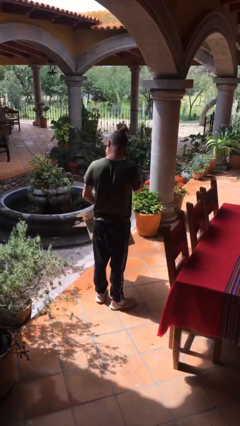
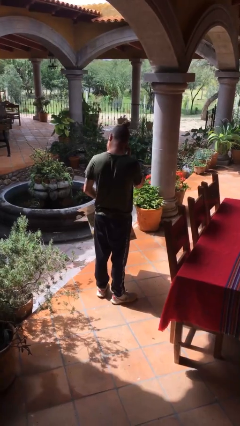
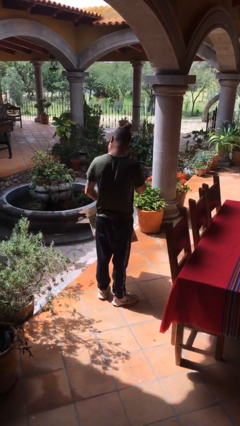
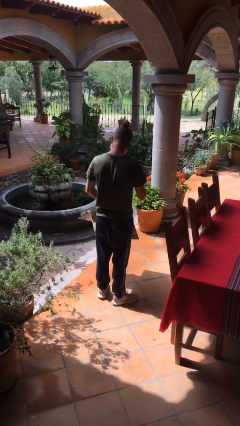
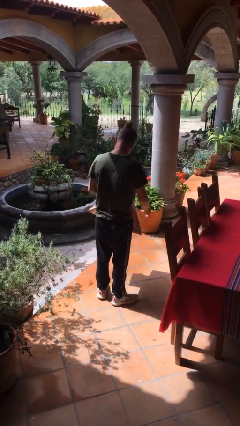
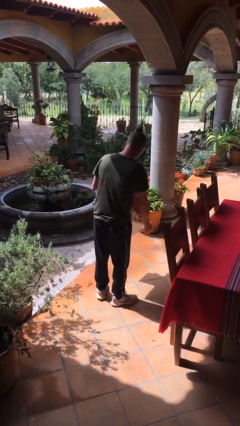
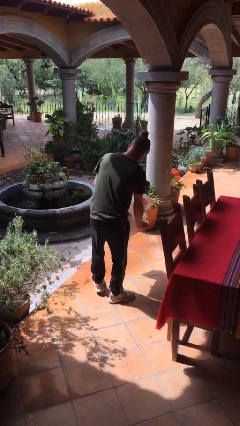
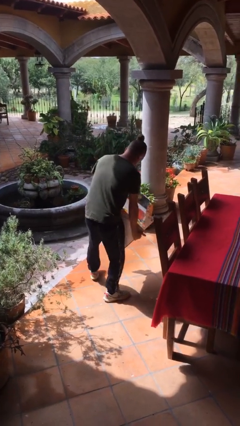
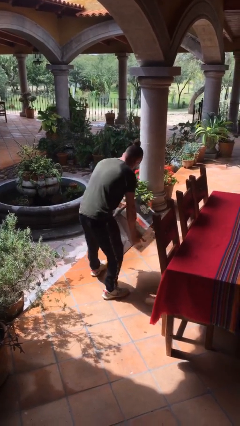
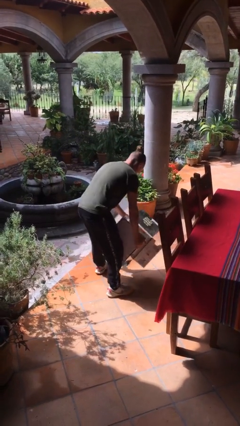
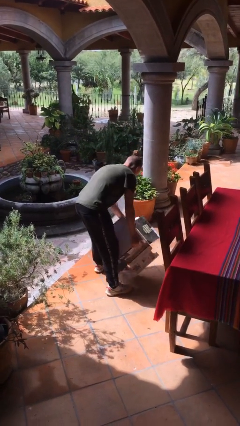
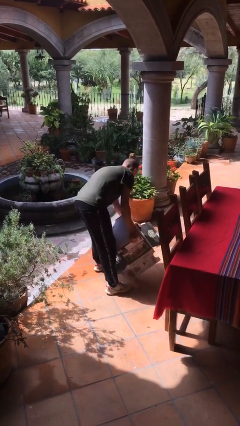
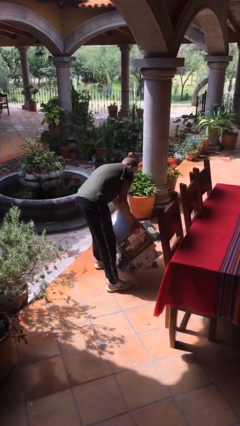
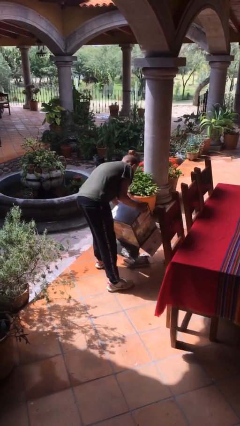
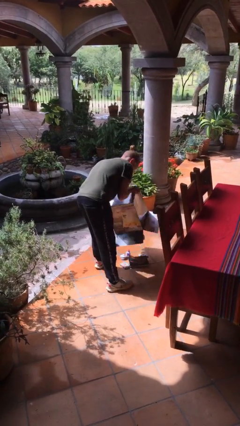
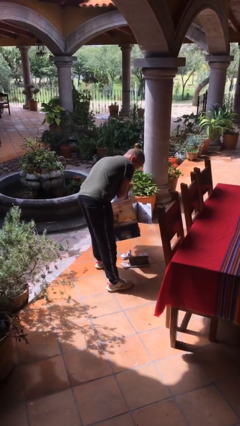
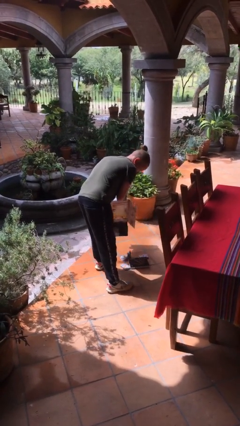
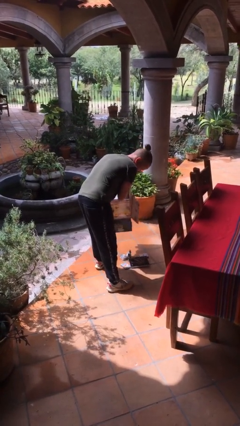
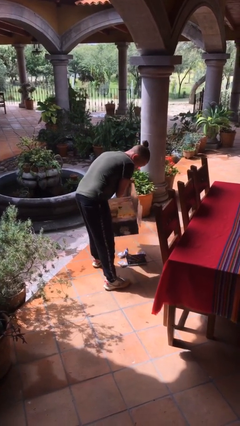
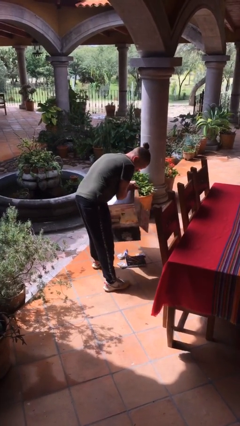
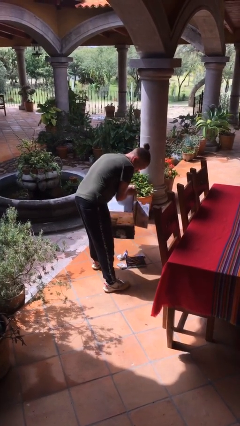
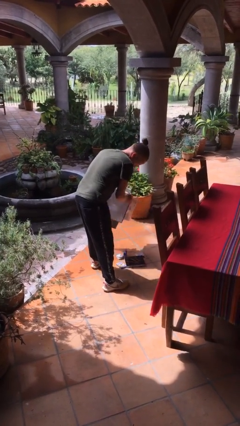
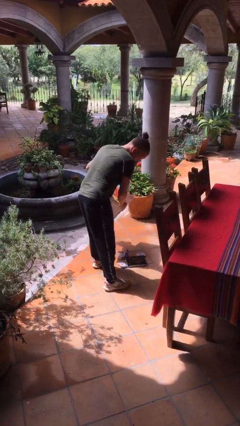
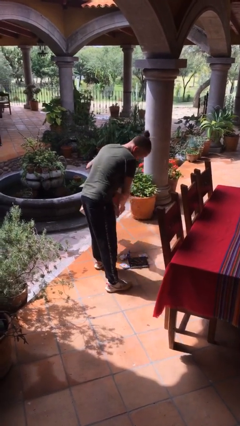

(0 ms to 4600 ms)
person unloads box onto floor

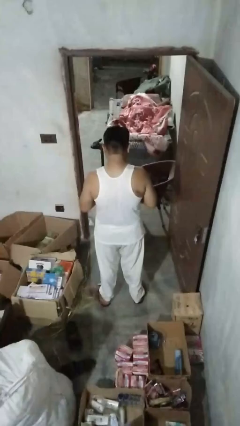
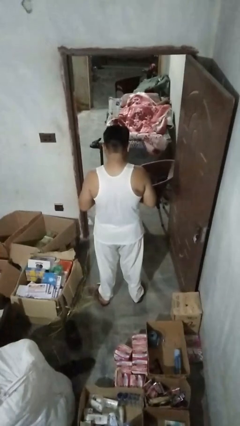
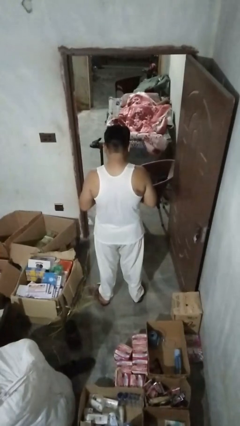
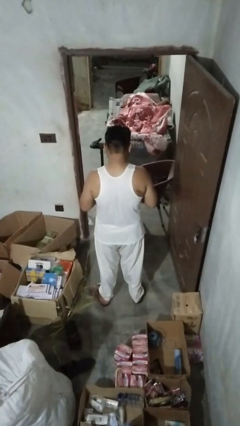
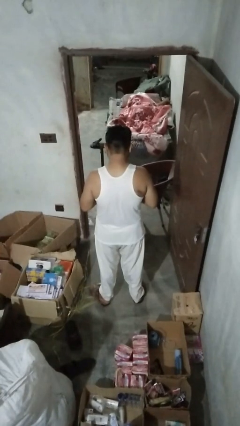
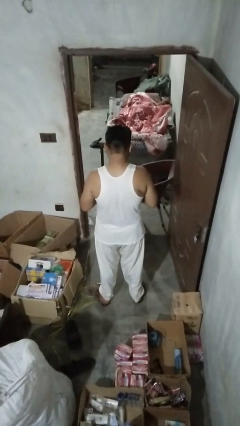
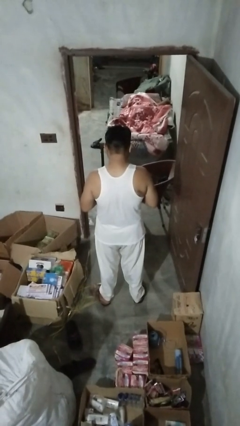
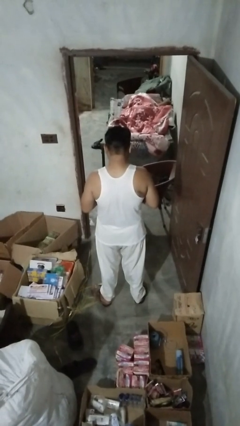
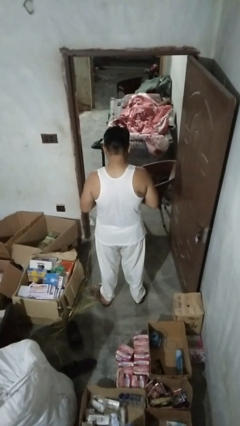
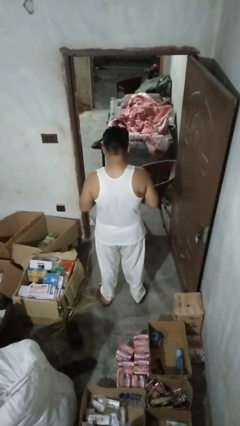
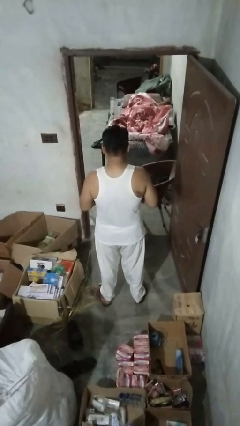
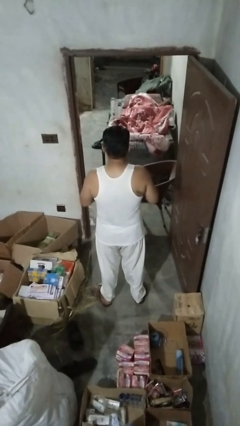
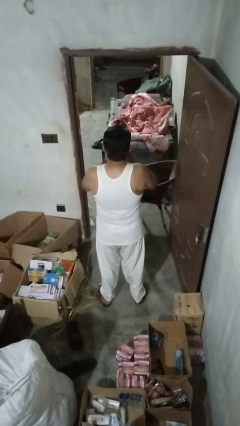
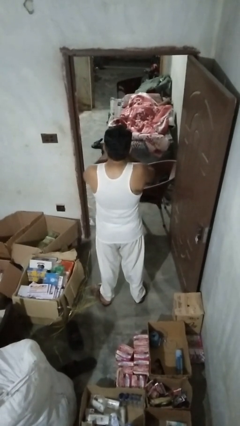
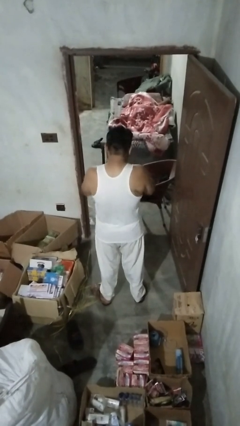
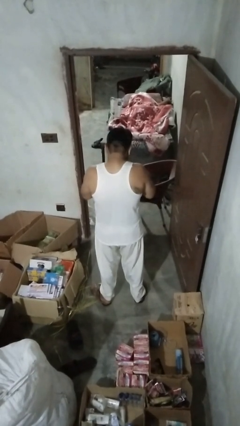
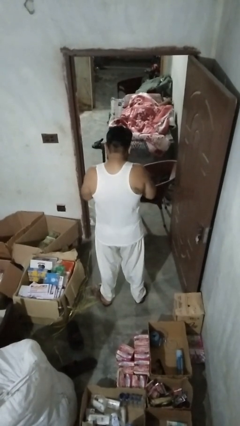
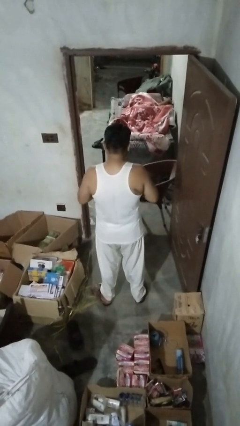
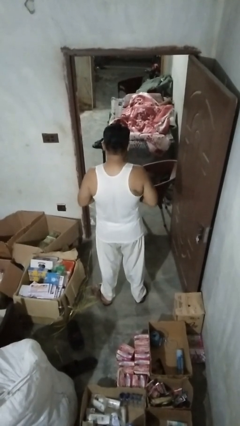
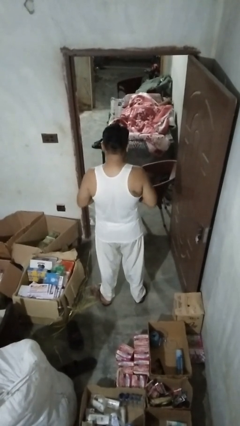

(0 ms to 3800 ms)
person sneezes into hand

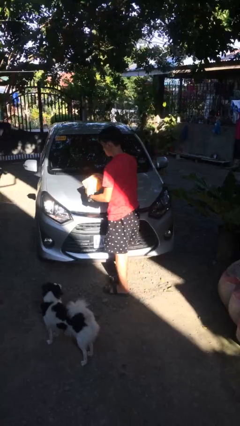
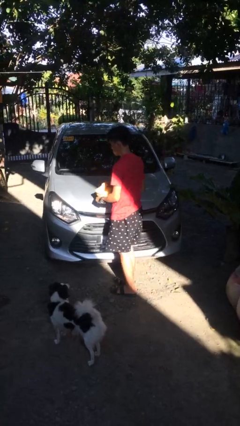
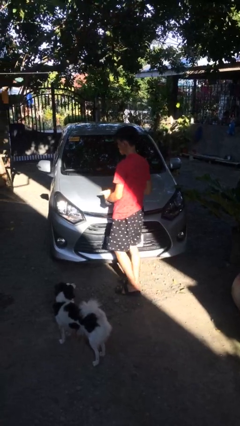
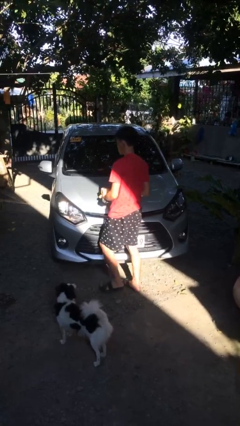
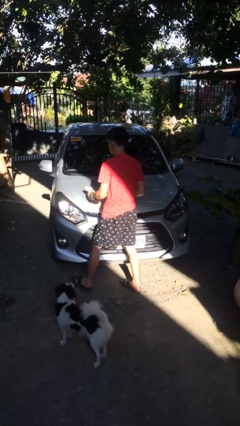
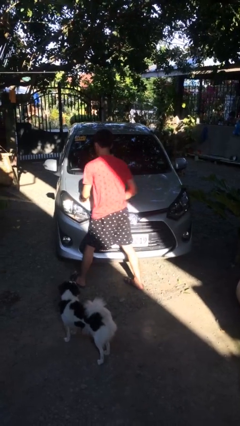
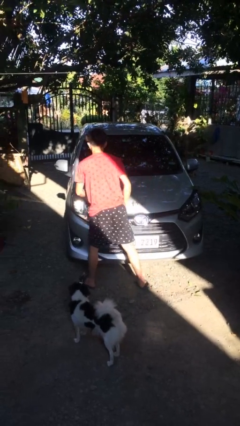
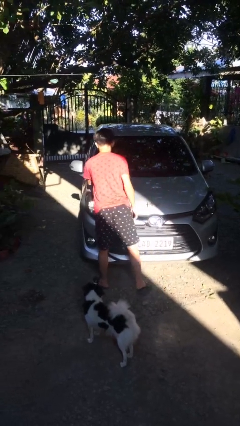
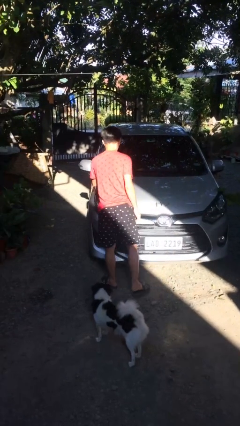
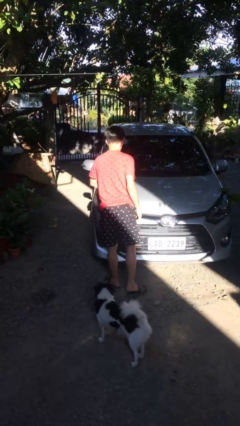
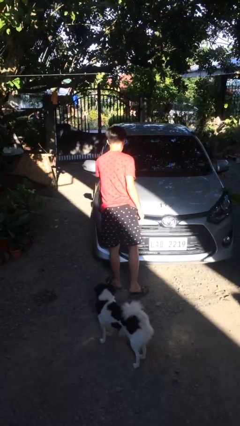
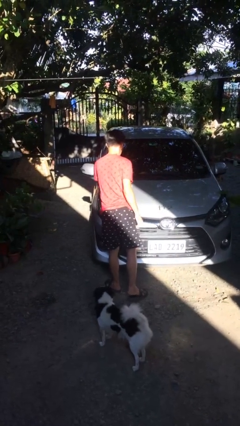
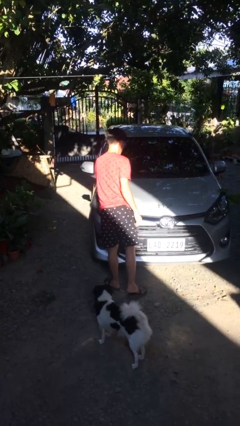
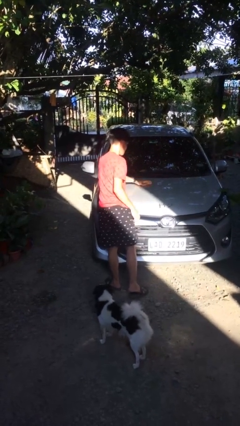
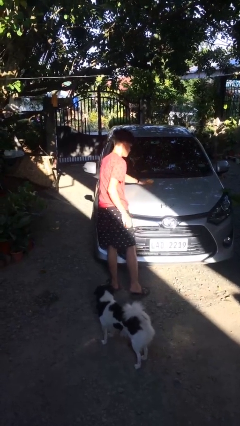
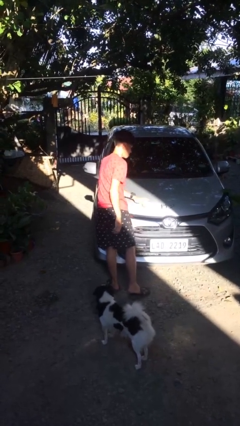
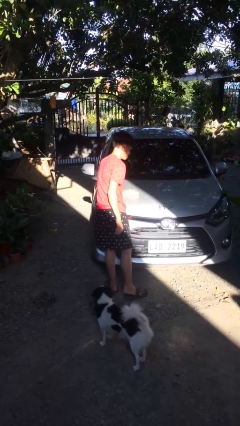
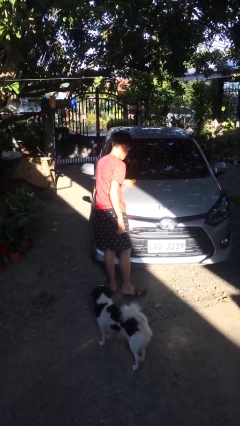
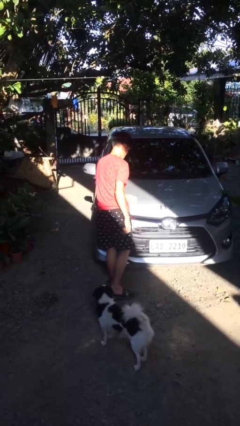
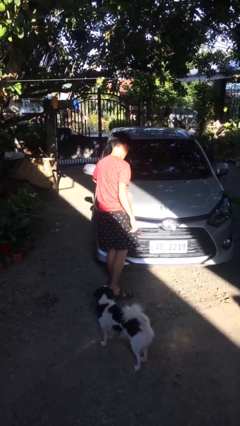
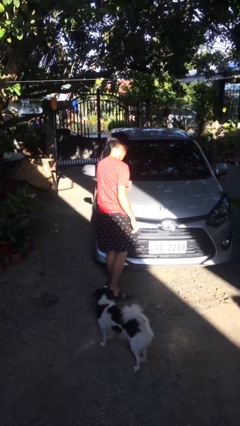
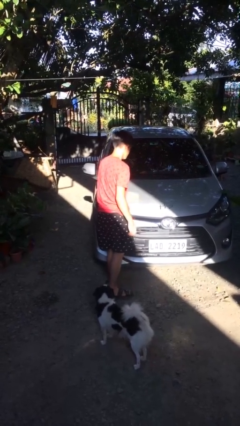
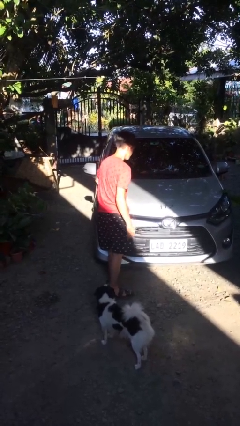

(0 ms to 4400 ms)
person polishes car with rag

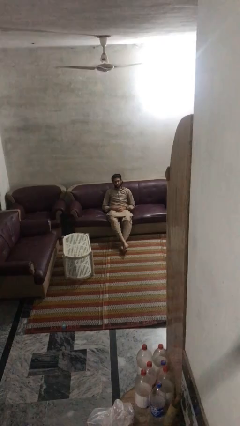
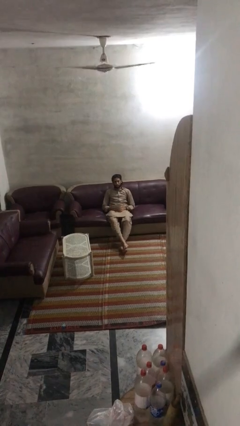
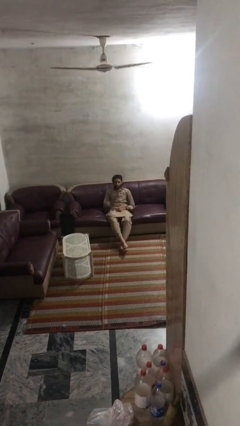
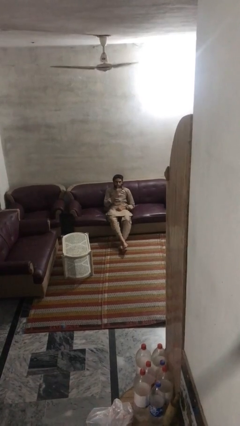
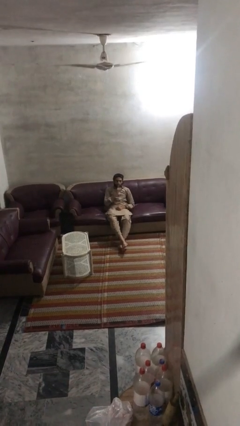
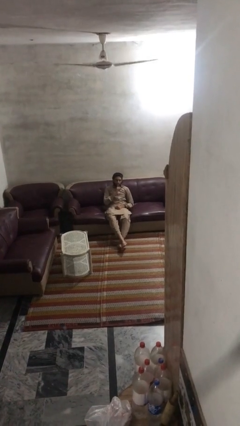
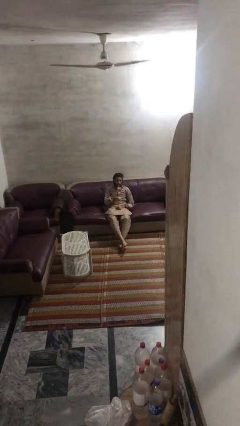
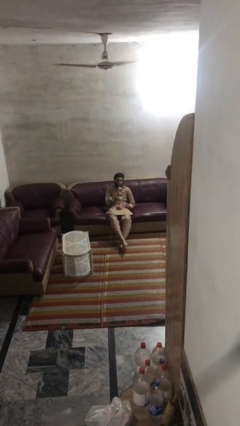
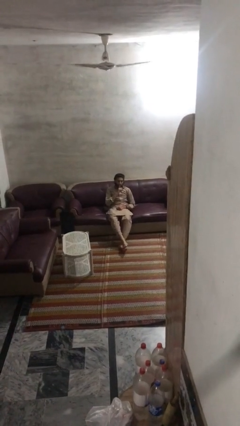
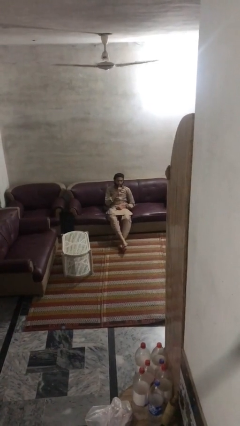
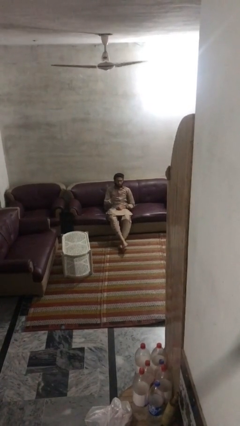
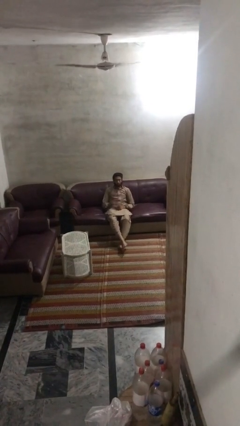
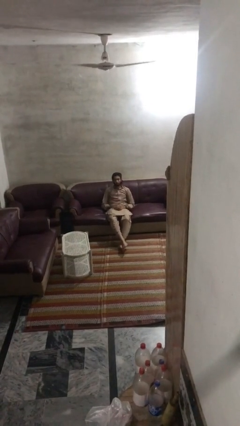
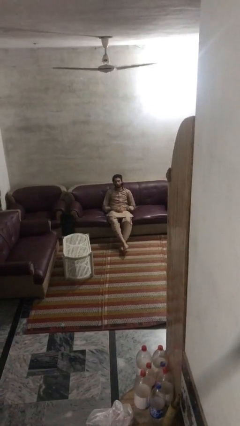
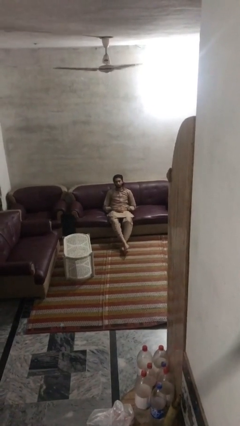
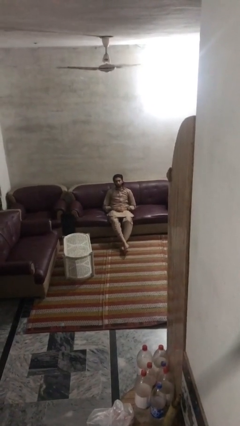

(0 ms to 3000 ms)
person gestures be quiet

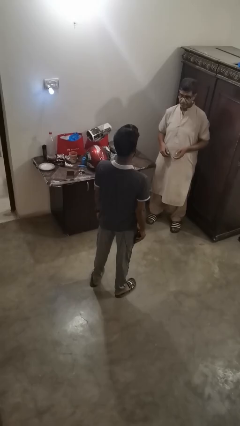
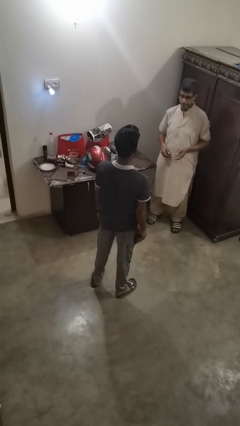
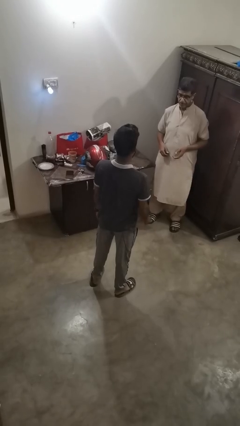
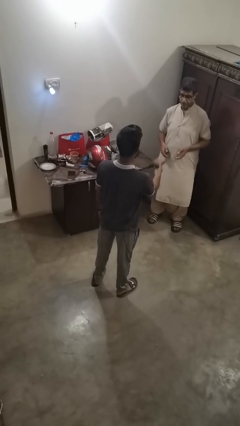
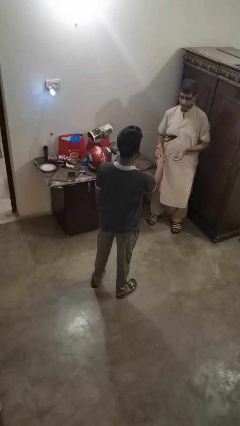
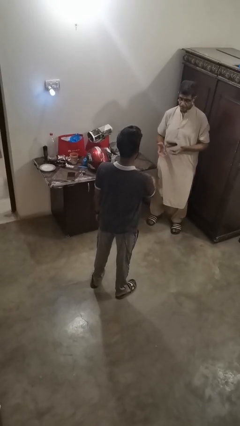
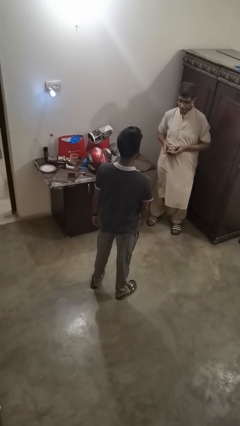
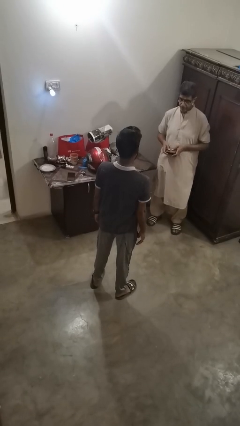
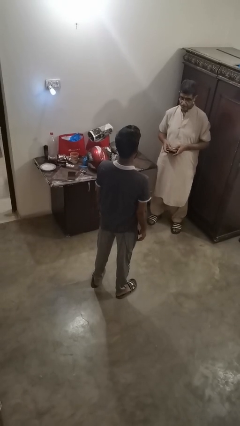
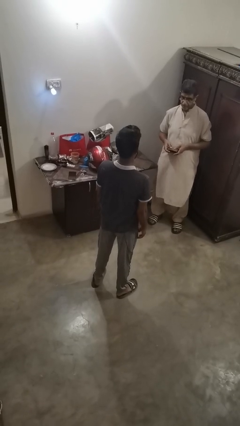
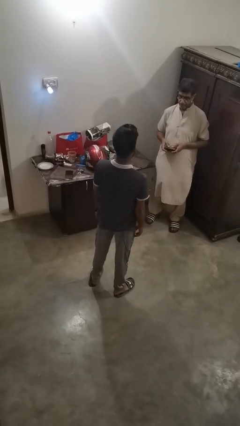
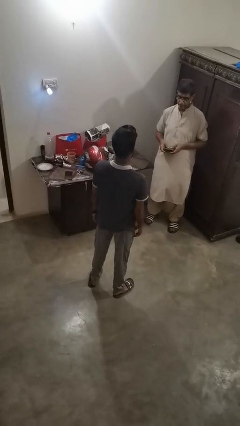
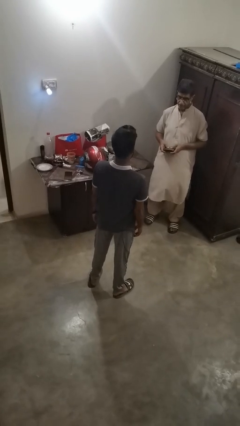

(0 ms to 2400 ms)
person throws object to person
